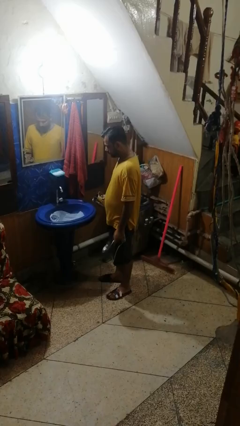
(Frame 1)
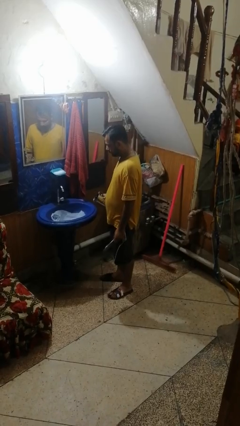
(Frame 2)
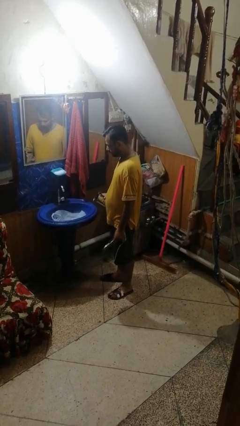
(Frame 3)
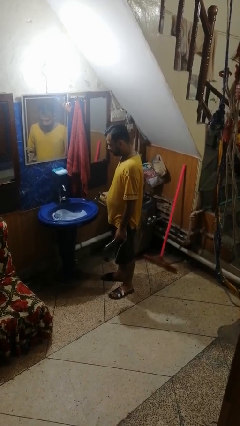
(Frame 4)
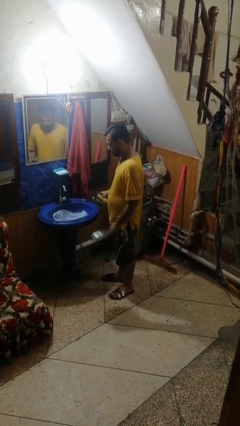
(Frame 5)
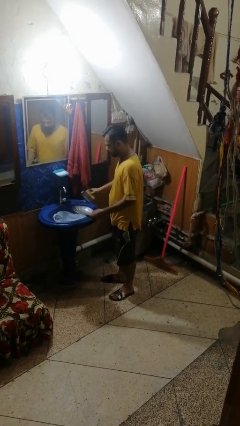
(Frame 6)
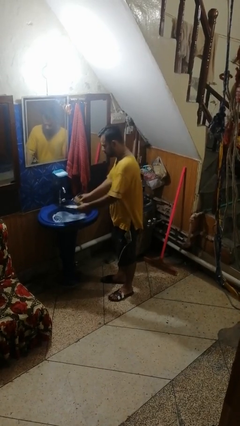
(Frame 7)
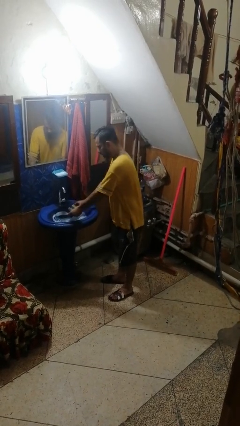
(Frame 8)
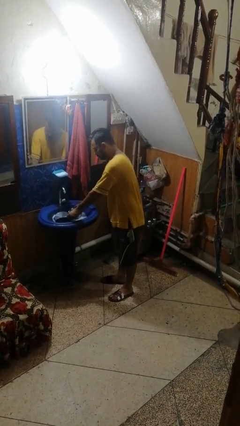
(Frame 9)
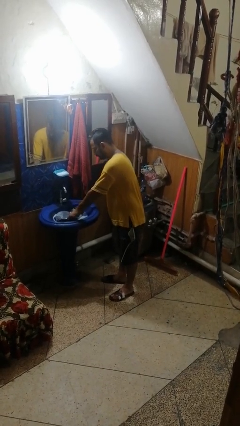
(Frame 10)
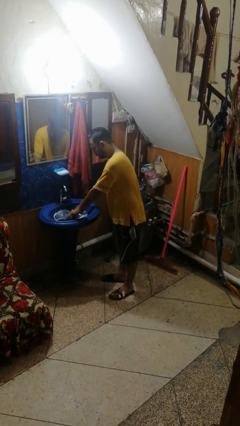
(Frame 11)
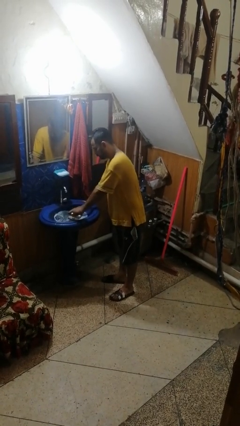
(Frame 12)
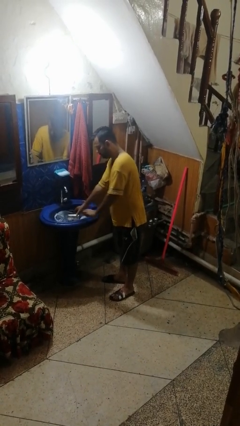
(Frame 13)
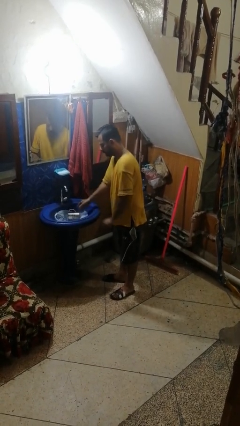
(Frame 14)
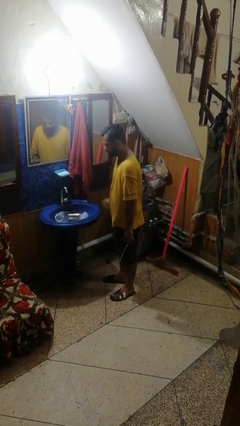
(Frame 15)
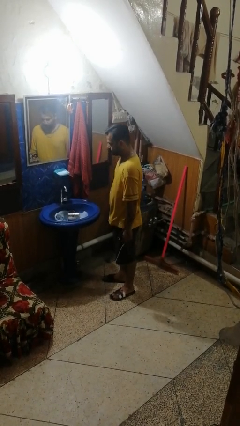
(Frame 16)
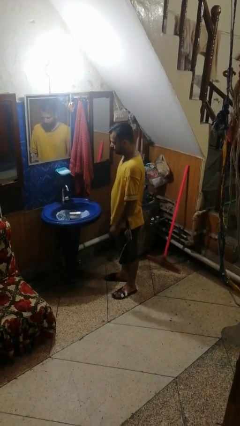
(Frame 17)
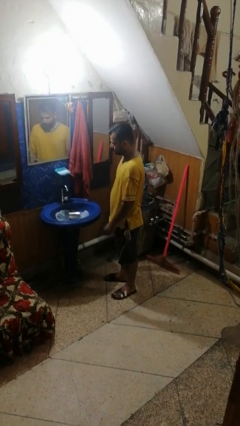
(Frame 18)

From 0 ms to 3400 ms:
person loads dishwasher

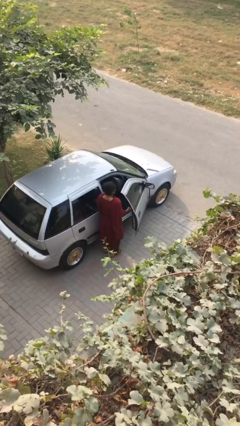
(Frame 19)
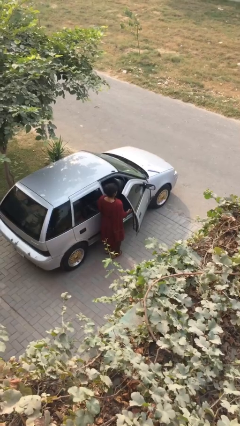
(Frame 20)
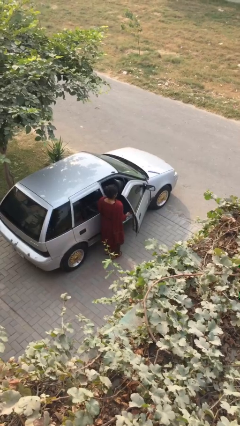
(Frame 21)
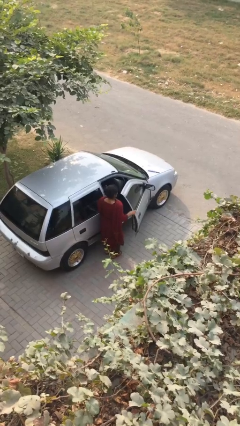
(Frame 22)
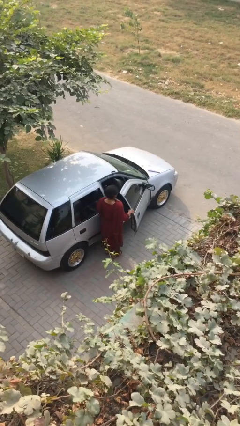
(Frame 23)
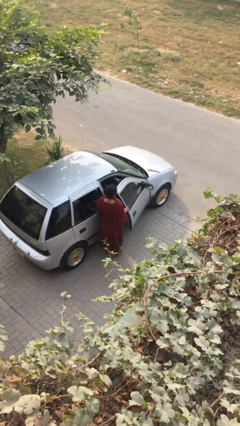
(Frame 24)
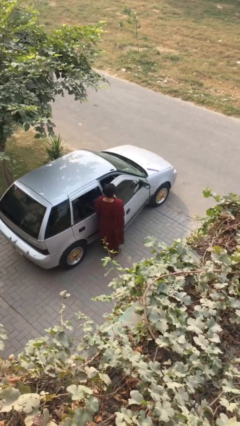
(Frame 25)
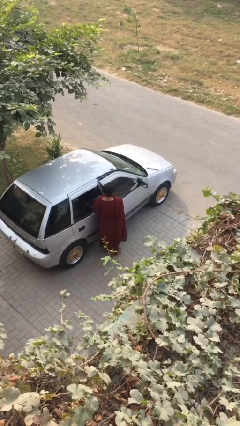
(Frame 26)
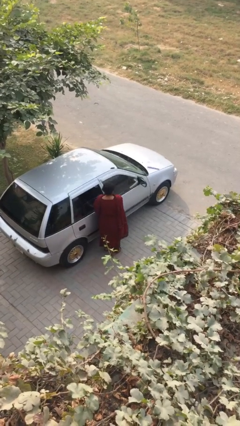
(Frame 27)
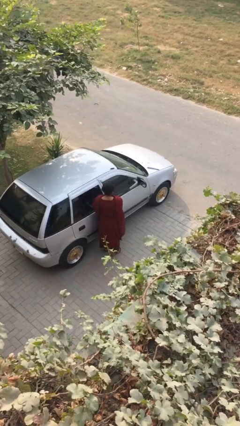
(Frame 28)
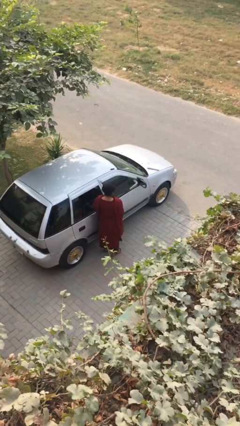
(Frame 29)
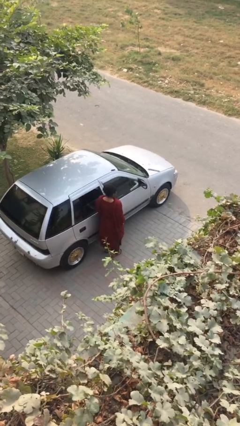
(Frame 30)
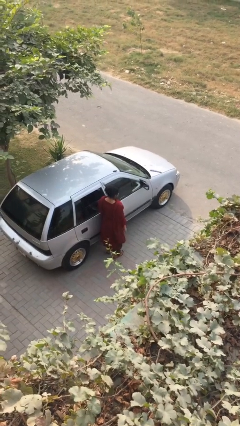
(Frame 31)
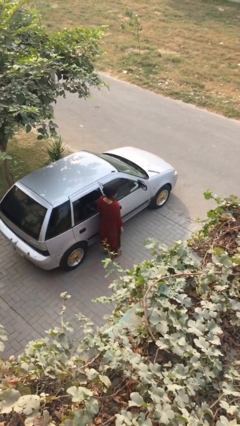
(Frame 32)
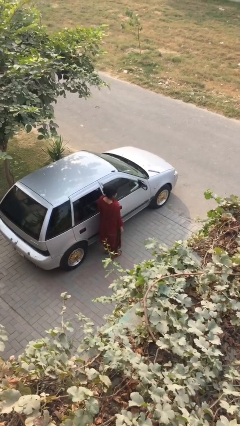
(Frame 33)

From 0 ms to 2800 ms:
person closes car door

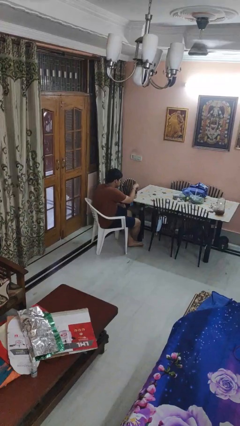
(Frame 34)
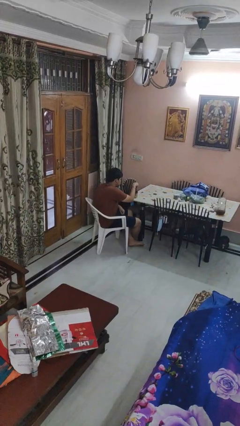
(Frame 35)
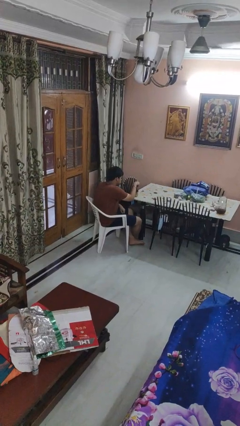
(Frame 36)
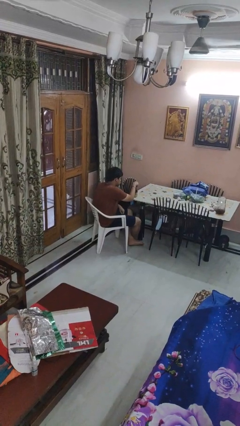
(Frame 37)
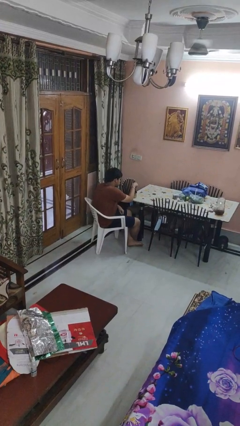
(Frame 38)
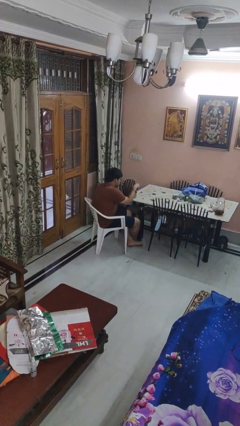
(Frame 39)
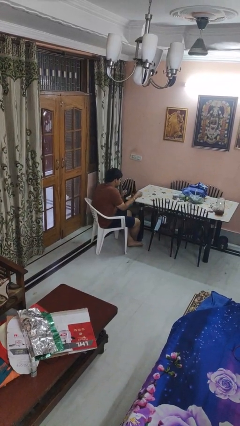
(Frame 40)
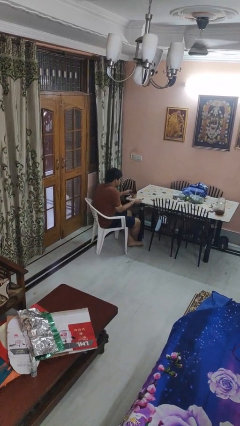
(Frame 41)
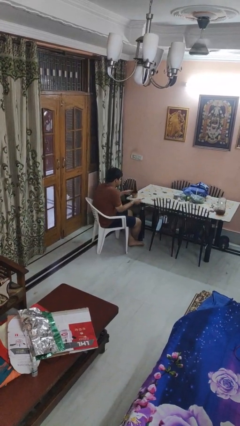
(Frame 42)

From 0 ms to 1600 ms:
person stirs mug

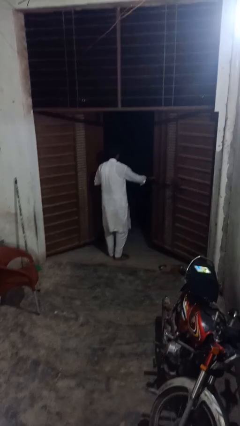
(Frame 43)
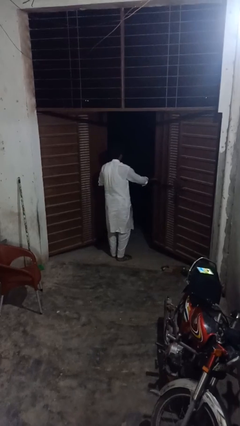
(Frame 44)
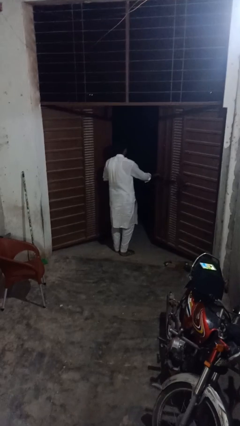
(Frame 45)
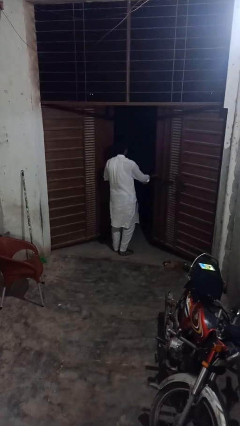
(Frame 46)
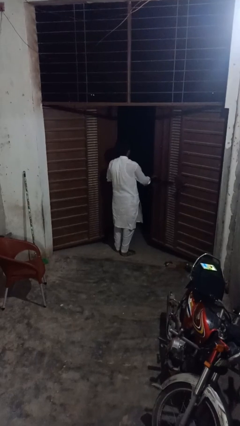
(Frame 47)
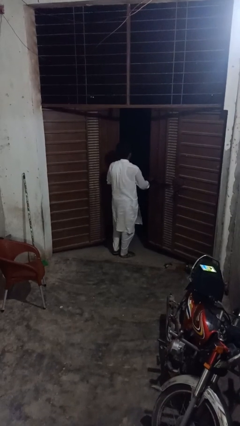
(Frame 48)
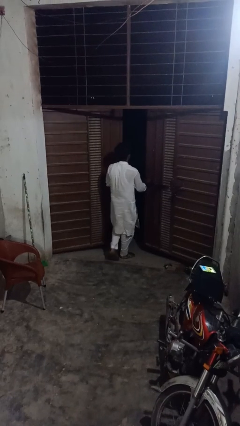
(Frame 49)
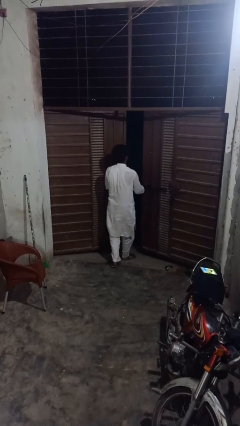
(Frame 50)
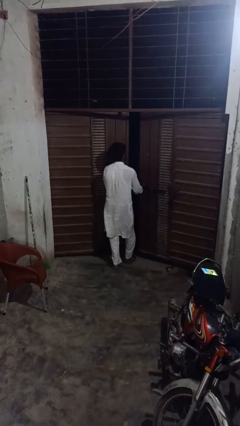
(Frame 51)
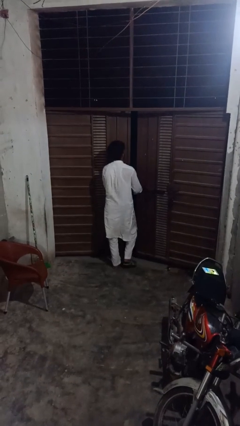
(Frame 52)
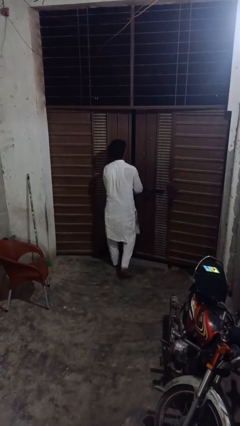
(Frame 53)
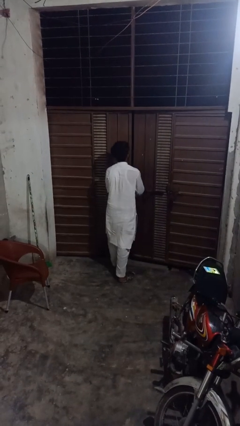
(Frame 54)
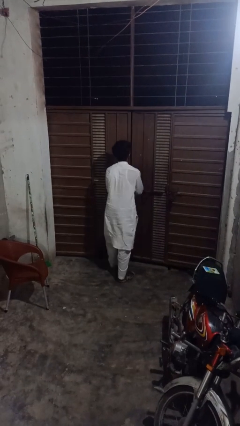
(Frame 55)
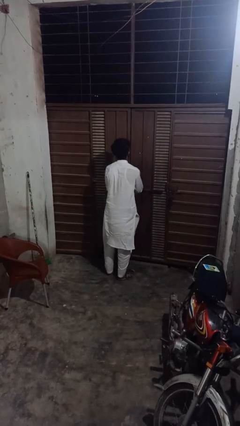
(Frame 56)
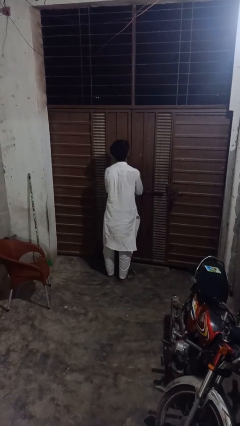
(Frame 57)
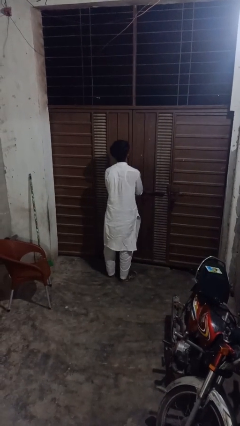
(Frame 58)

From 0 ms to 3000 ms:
person closes gate

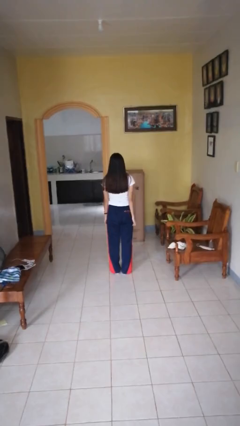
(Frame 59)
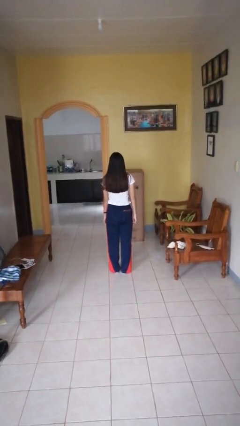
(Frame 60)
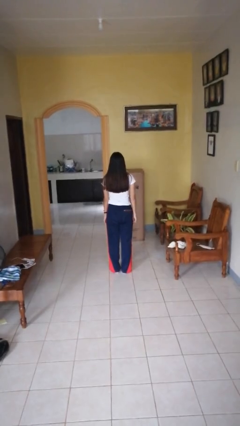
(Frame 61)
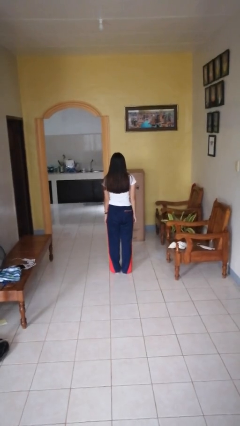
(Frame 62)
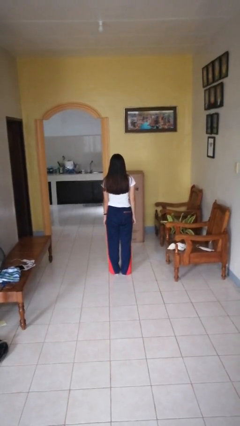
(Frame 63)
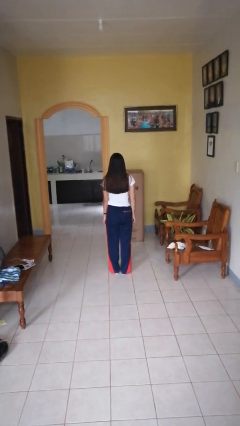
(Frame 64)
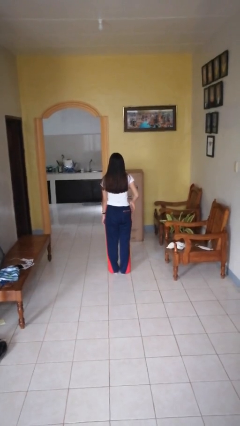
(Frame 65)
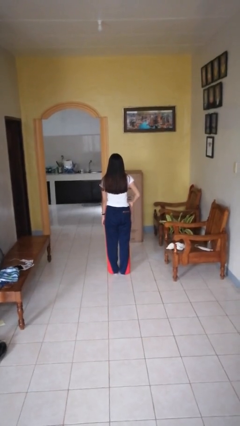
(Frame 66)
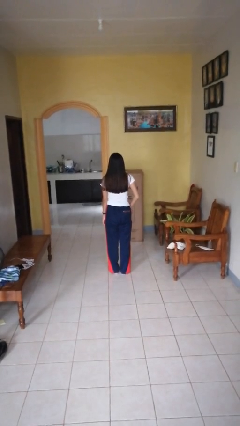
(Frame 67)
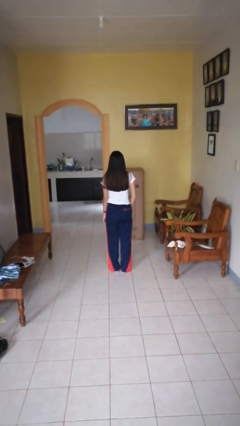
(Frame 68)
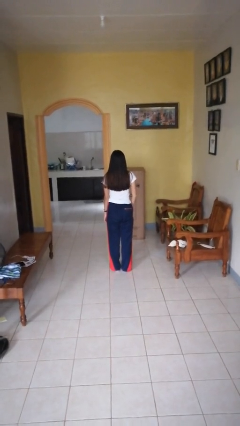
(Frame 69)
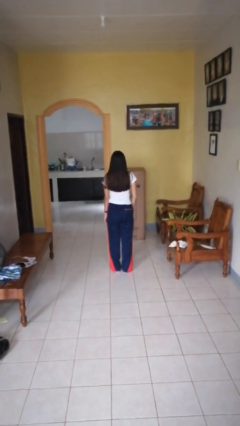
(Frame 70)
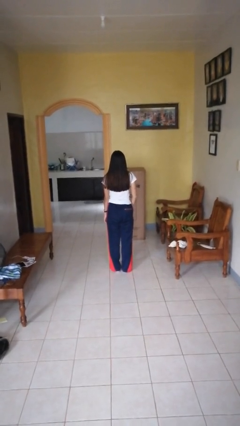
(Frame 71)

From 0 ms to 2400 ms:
person puts hands in back pockets

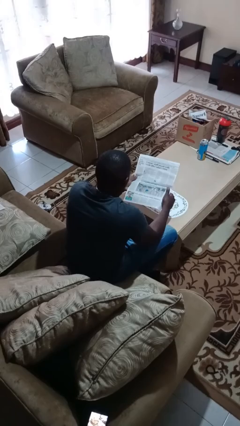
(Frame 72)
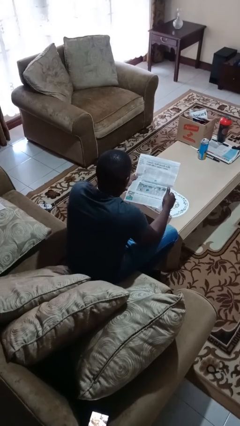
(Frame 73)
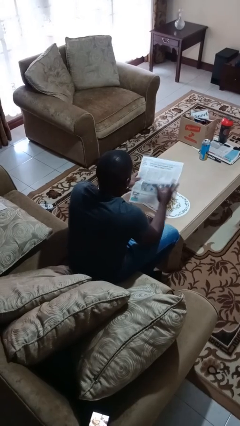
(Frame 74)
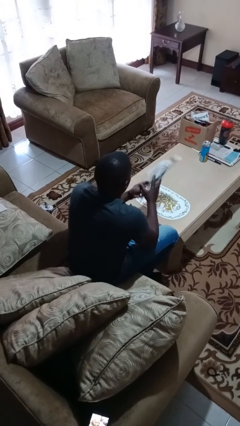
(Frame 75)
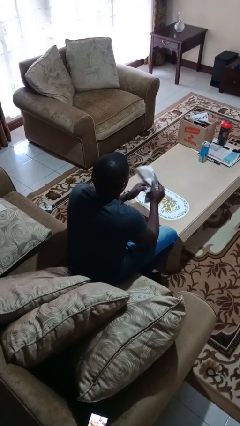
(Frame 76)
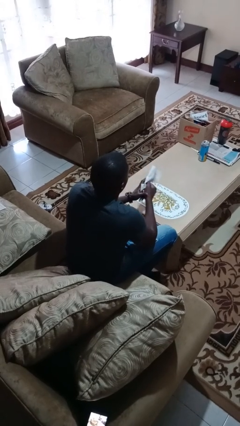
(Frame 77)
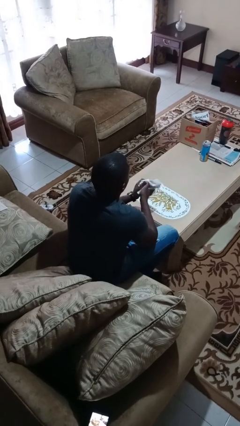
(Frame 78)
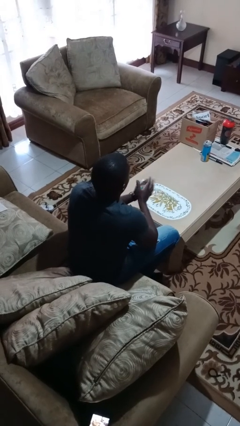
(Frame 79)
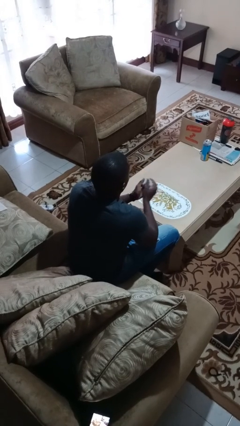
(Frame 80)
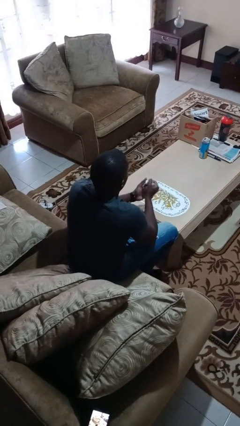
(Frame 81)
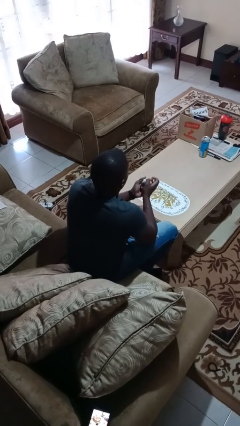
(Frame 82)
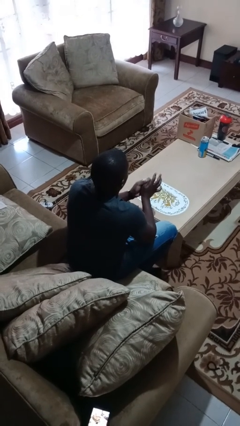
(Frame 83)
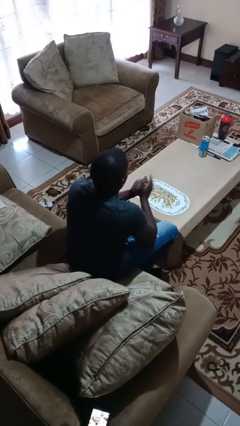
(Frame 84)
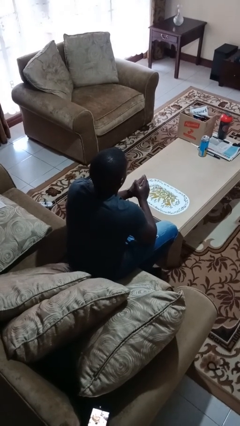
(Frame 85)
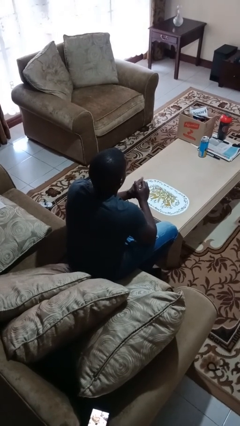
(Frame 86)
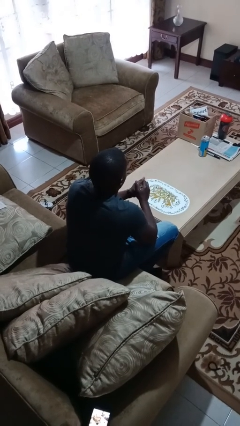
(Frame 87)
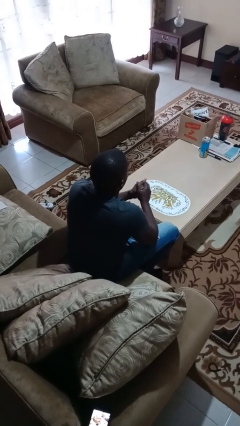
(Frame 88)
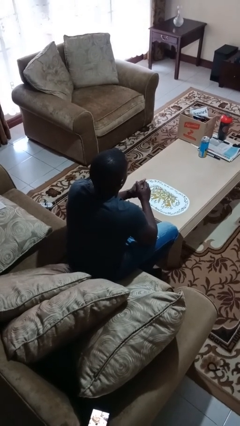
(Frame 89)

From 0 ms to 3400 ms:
person crumples paper

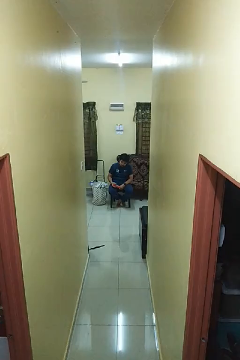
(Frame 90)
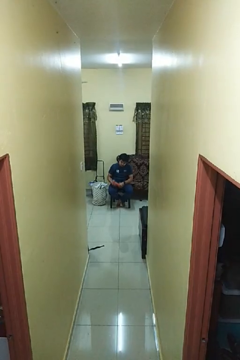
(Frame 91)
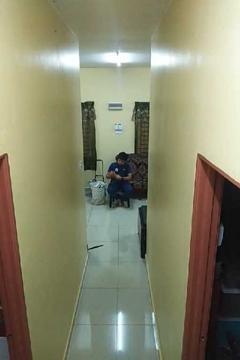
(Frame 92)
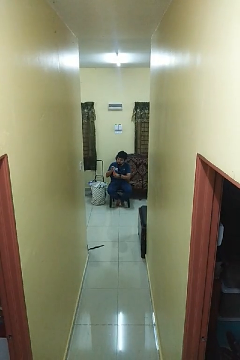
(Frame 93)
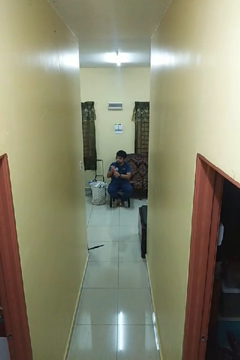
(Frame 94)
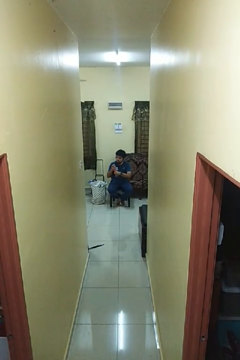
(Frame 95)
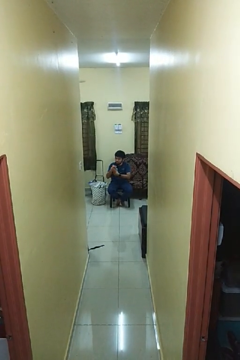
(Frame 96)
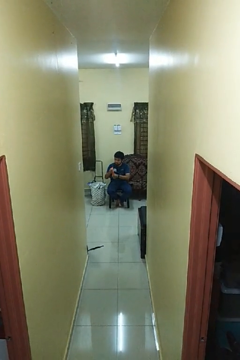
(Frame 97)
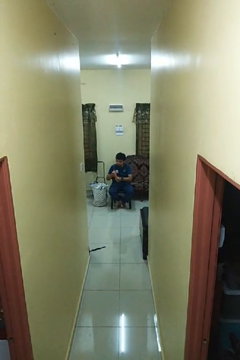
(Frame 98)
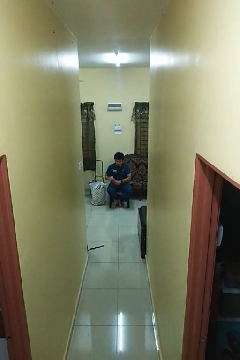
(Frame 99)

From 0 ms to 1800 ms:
person squeezes object
